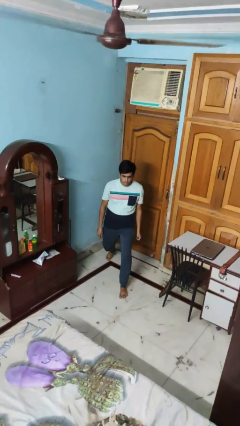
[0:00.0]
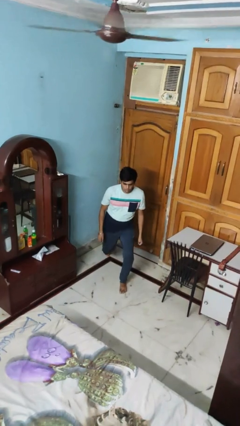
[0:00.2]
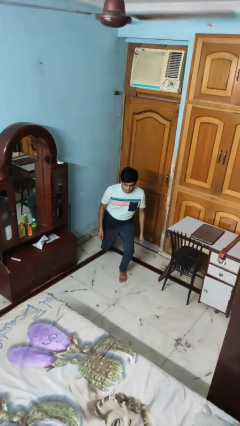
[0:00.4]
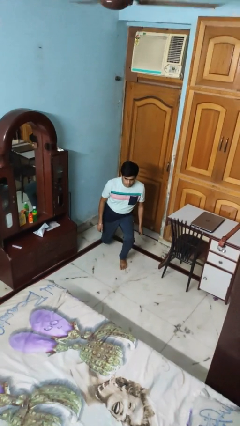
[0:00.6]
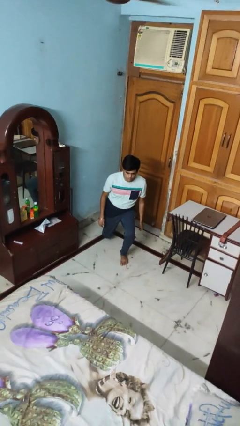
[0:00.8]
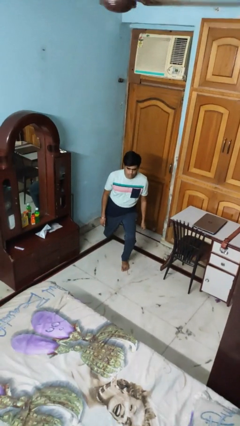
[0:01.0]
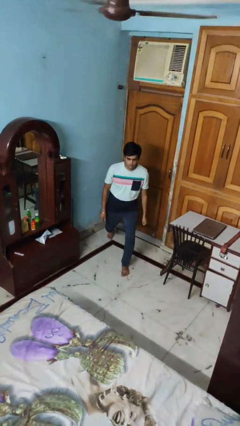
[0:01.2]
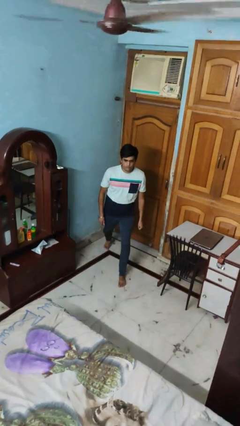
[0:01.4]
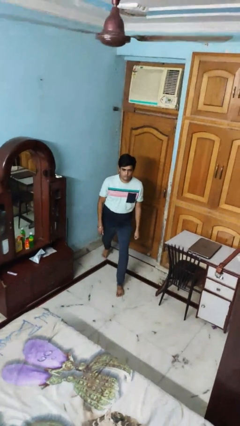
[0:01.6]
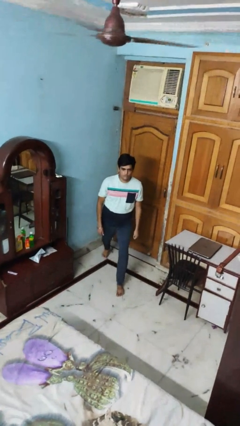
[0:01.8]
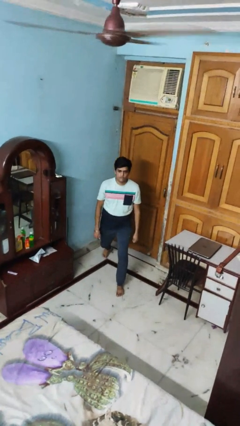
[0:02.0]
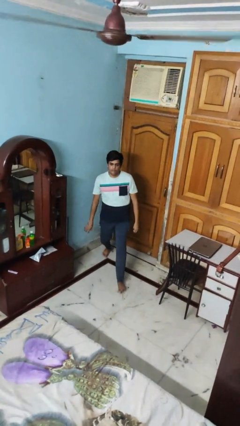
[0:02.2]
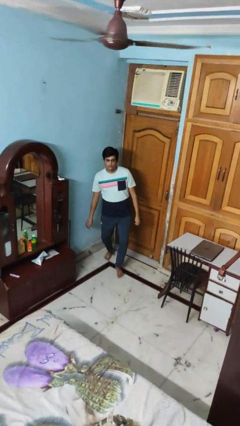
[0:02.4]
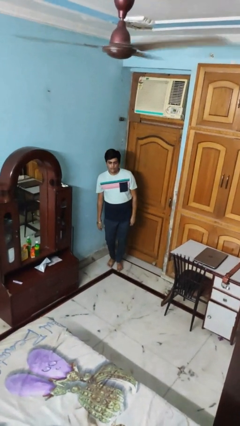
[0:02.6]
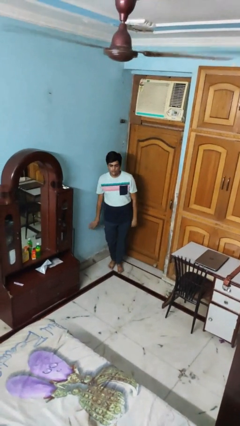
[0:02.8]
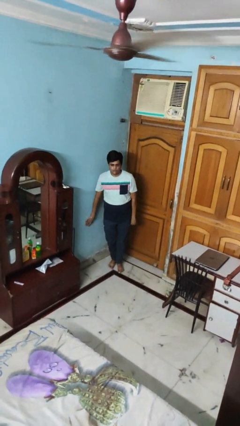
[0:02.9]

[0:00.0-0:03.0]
person exercises with lunges

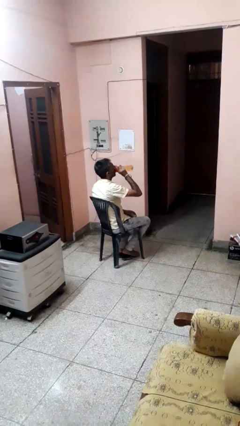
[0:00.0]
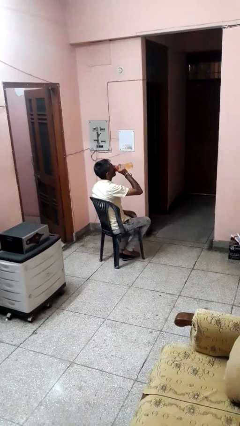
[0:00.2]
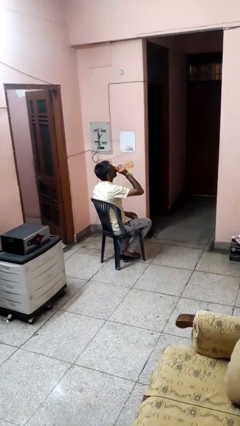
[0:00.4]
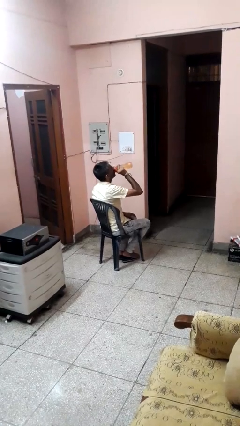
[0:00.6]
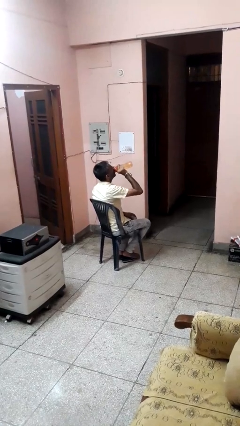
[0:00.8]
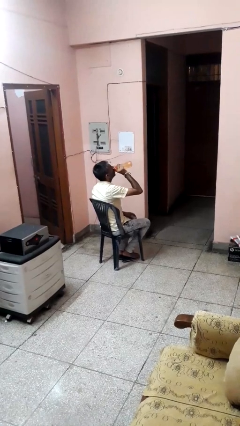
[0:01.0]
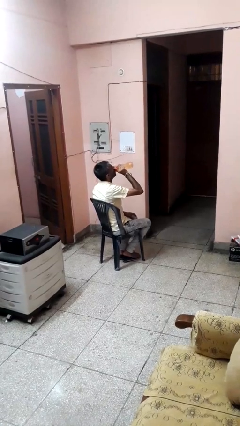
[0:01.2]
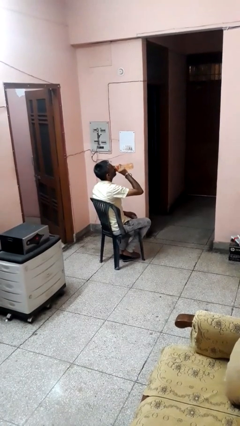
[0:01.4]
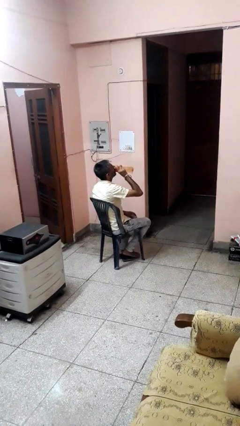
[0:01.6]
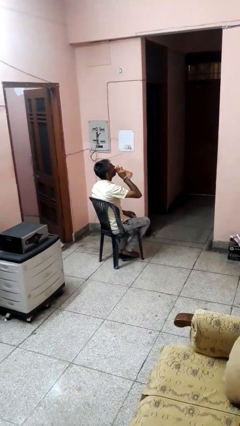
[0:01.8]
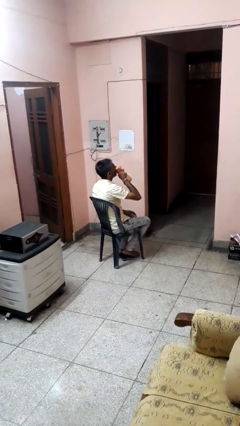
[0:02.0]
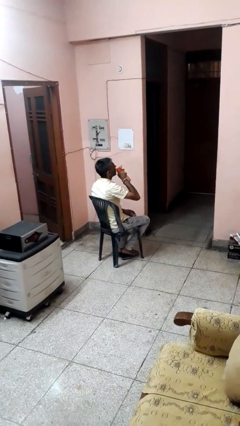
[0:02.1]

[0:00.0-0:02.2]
person drinks from bottle

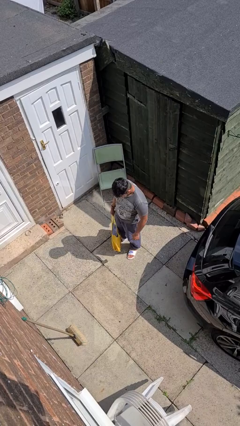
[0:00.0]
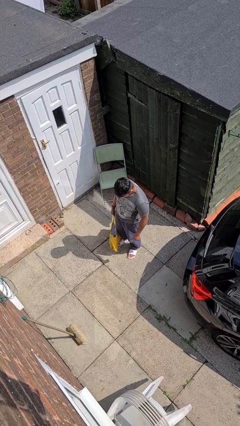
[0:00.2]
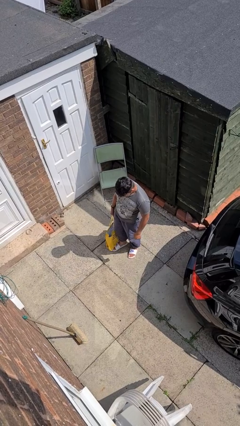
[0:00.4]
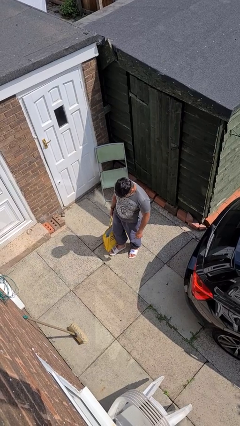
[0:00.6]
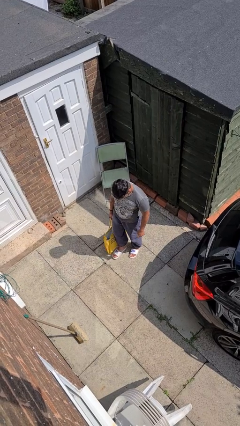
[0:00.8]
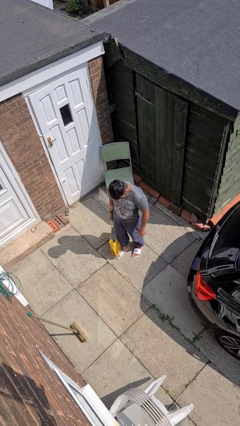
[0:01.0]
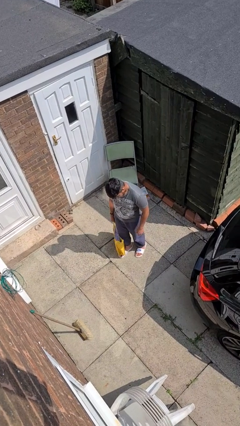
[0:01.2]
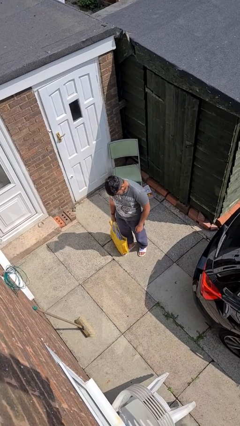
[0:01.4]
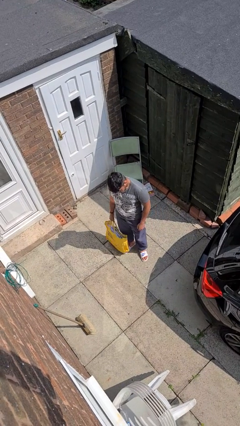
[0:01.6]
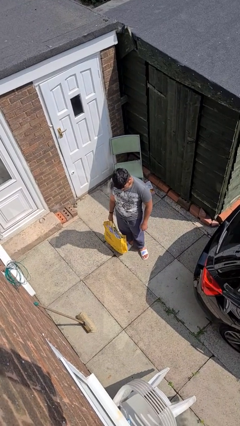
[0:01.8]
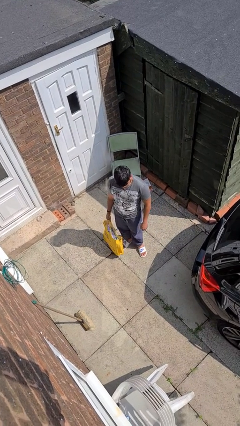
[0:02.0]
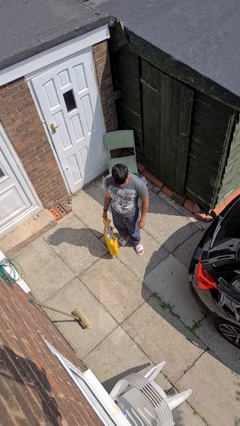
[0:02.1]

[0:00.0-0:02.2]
person carries groceries

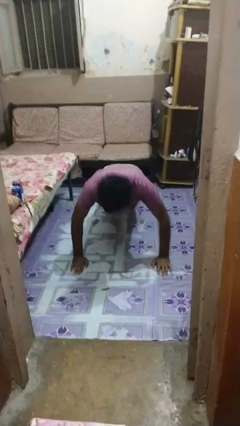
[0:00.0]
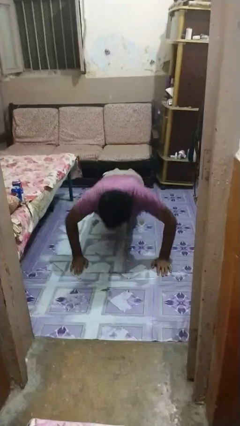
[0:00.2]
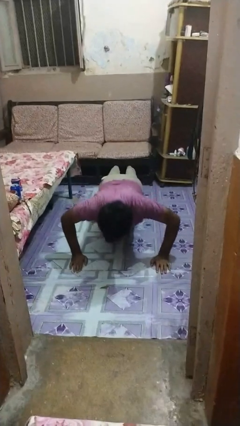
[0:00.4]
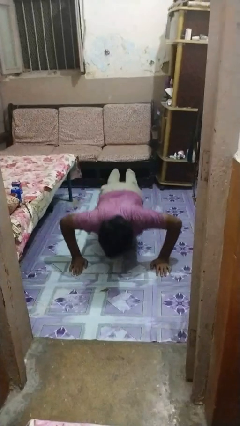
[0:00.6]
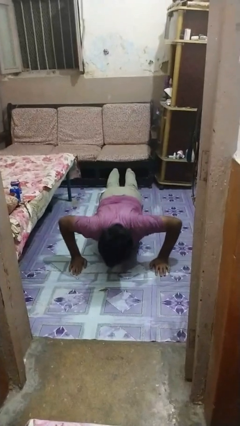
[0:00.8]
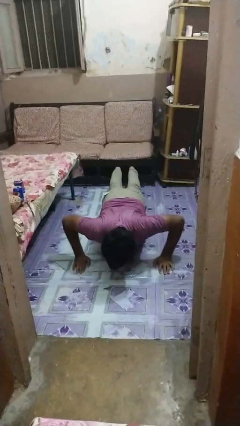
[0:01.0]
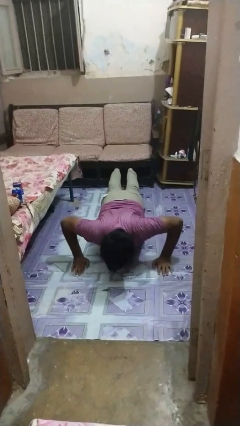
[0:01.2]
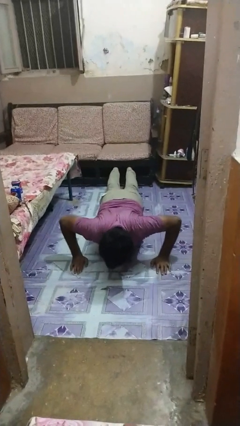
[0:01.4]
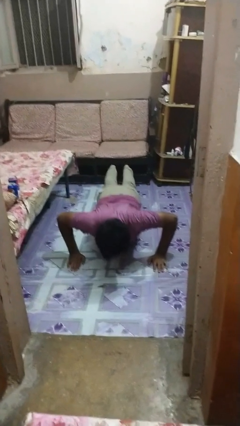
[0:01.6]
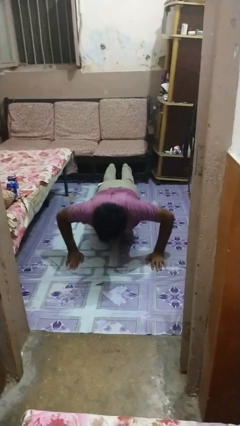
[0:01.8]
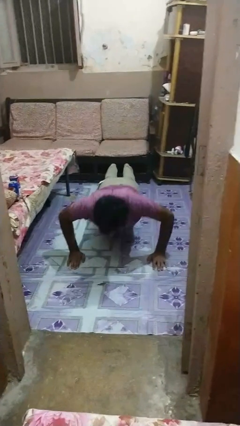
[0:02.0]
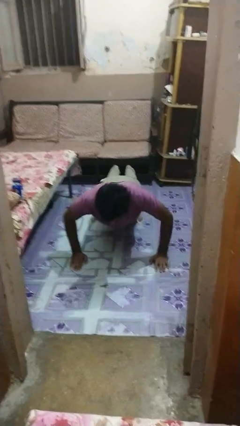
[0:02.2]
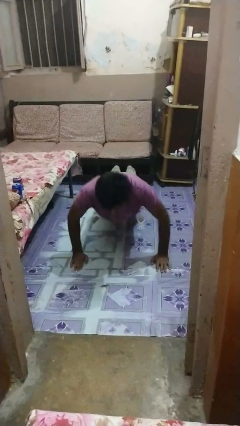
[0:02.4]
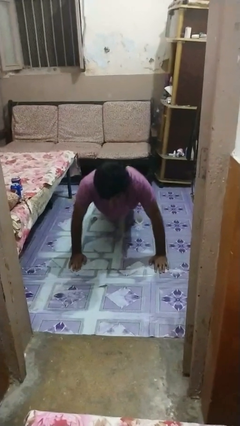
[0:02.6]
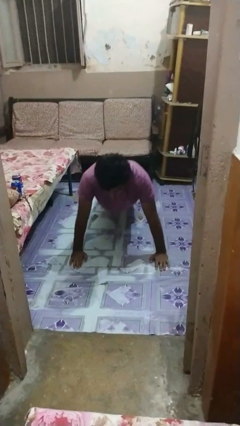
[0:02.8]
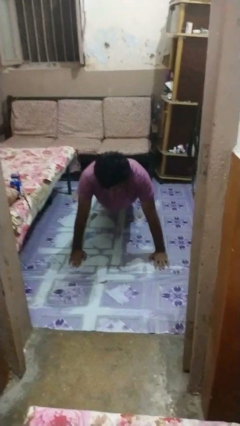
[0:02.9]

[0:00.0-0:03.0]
person exercises with pushup

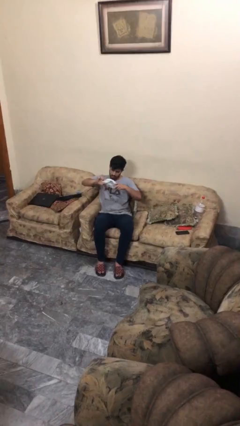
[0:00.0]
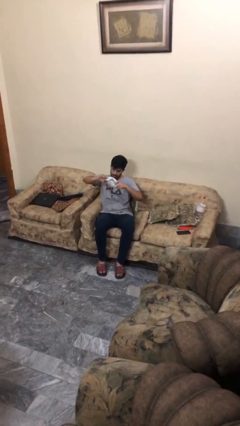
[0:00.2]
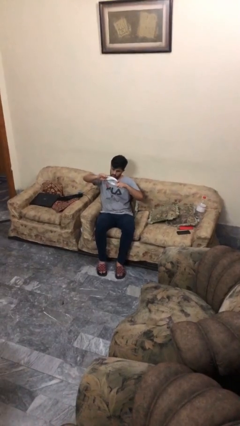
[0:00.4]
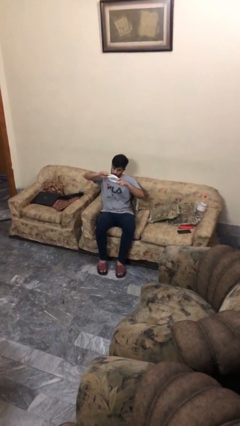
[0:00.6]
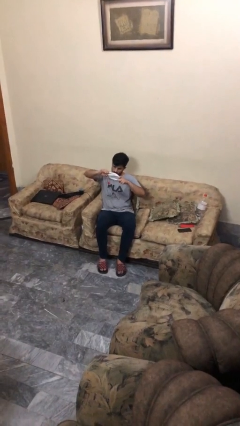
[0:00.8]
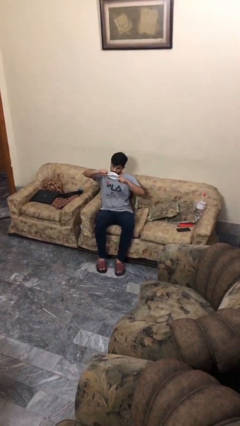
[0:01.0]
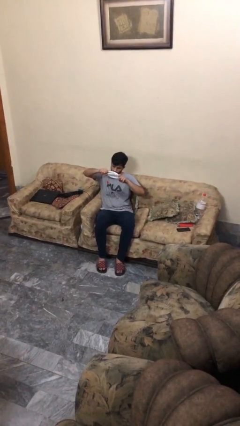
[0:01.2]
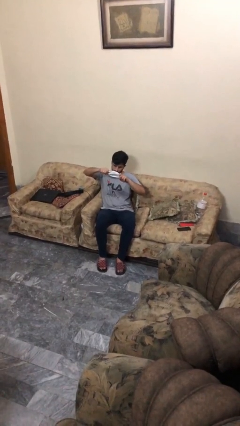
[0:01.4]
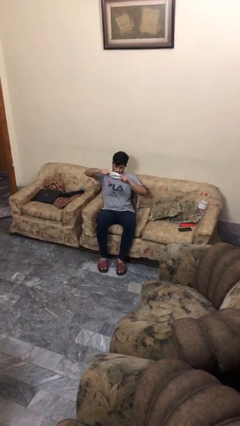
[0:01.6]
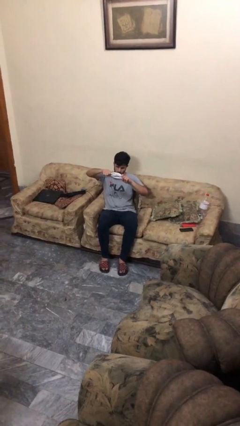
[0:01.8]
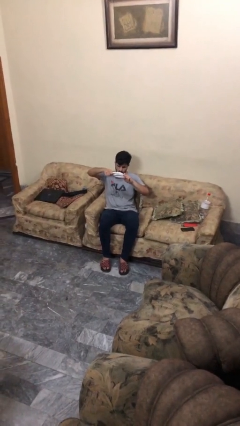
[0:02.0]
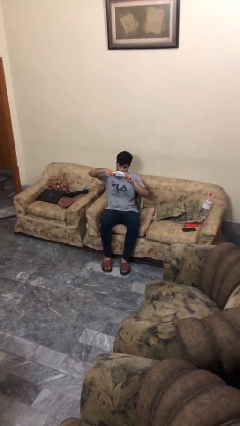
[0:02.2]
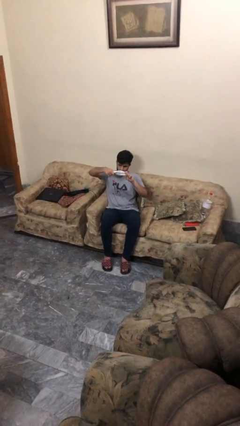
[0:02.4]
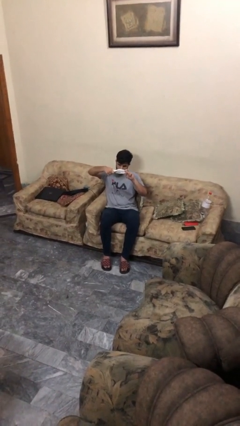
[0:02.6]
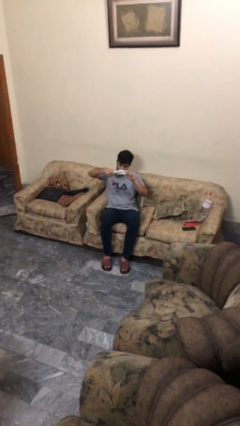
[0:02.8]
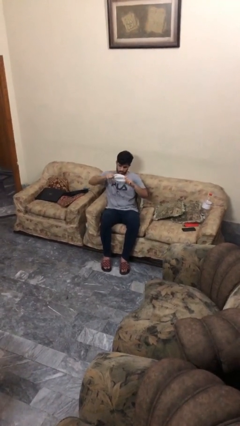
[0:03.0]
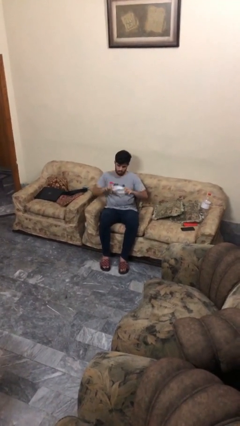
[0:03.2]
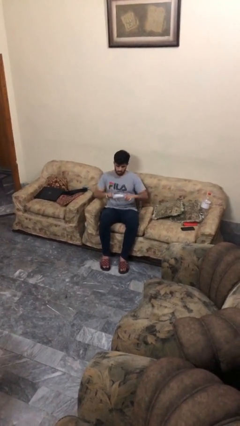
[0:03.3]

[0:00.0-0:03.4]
person squeezes object

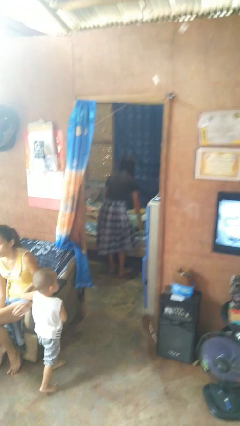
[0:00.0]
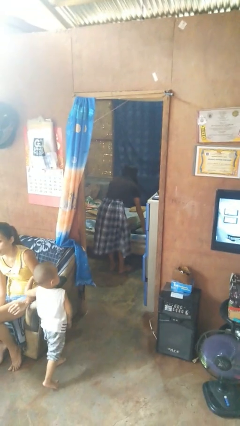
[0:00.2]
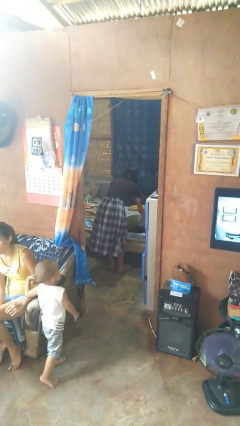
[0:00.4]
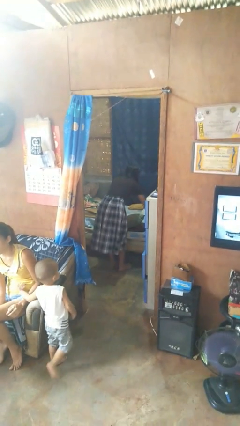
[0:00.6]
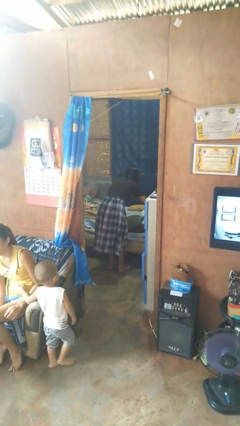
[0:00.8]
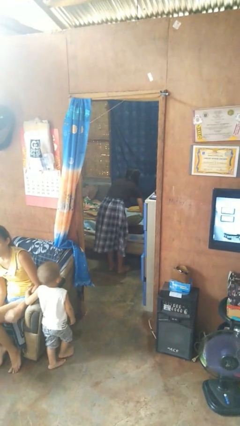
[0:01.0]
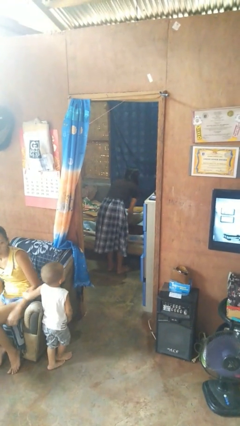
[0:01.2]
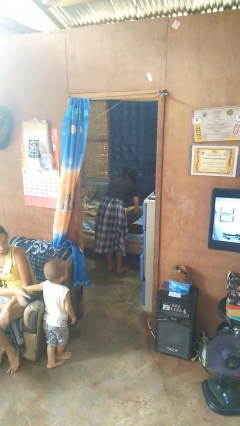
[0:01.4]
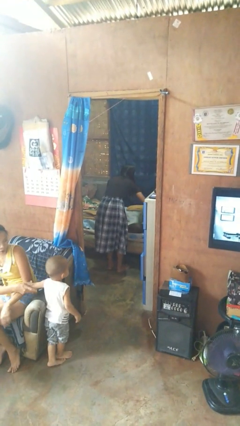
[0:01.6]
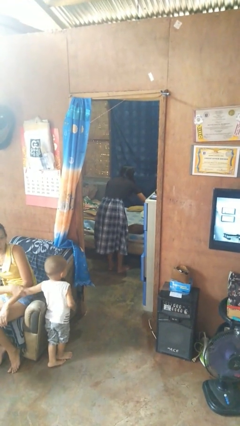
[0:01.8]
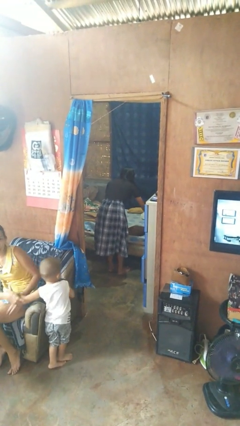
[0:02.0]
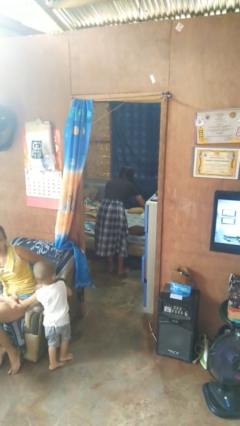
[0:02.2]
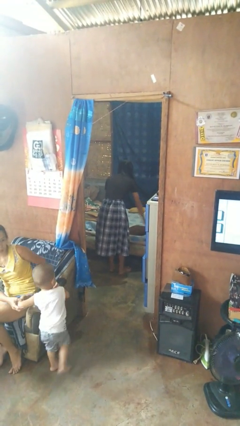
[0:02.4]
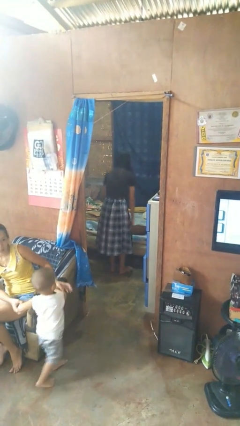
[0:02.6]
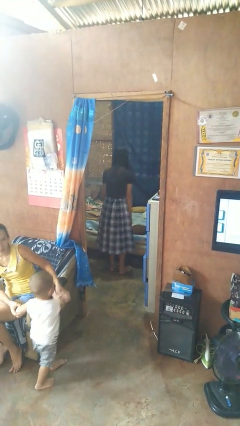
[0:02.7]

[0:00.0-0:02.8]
person makes bed

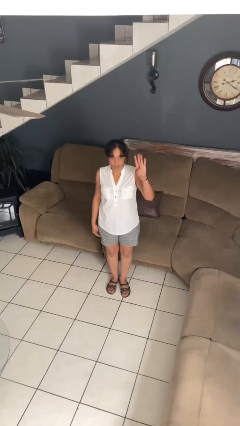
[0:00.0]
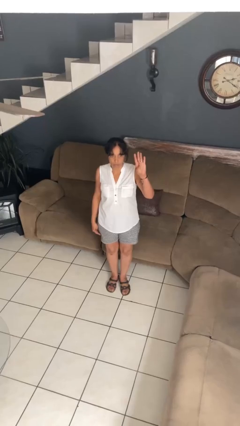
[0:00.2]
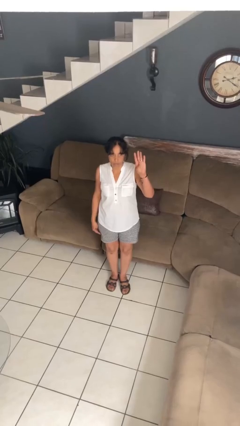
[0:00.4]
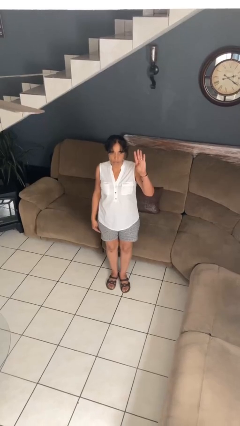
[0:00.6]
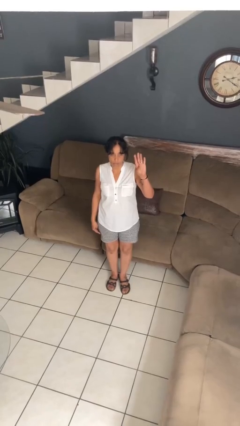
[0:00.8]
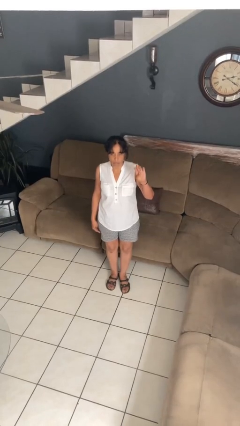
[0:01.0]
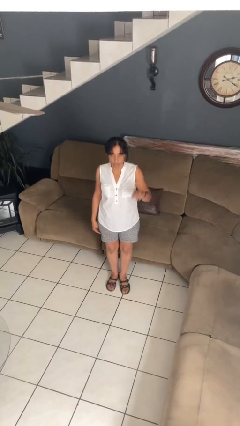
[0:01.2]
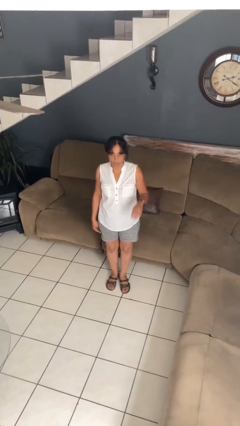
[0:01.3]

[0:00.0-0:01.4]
person gestures number four
